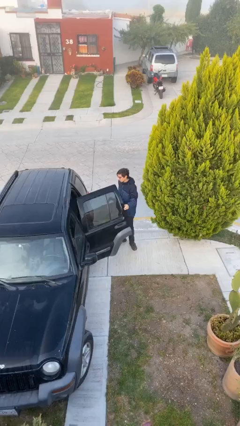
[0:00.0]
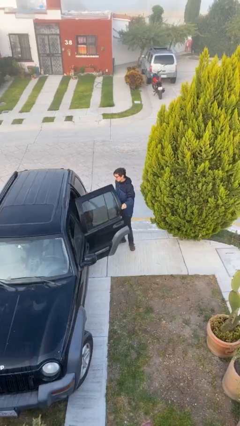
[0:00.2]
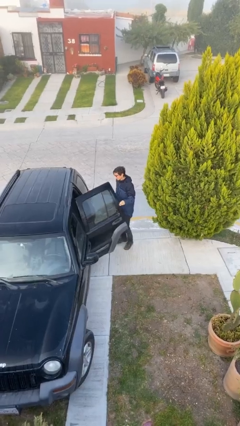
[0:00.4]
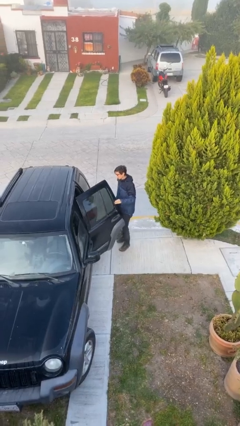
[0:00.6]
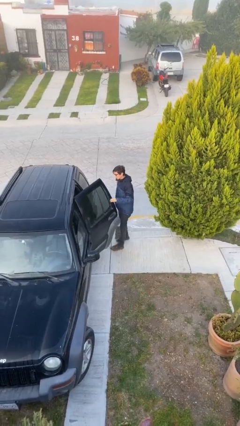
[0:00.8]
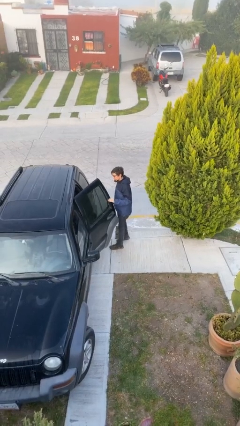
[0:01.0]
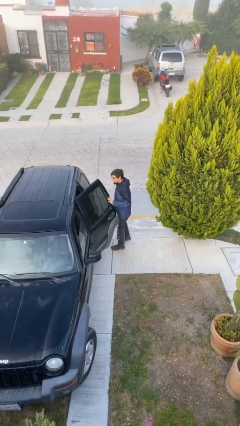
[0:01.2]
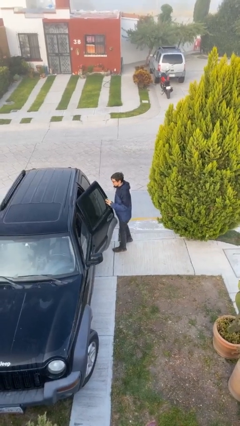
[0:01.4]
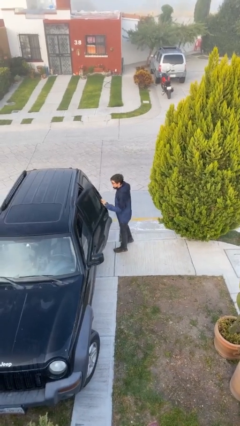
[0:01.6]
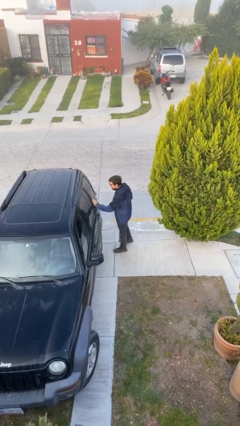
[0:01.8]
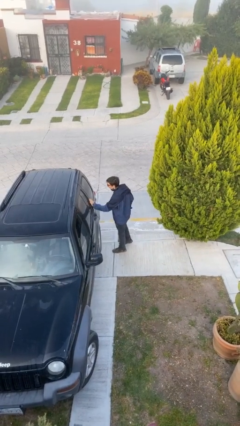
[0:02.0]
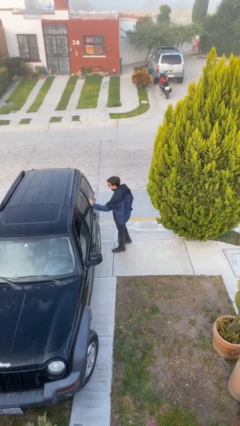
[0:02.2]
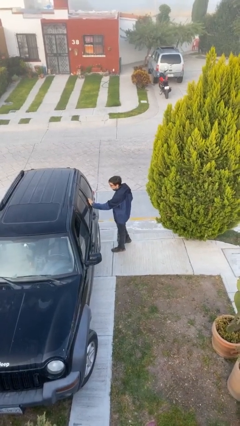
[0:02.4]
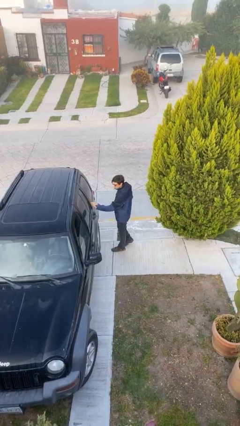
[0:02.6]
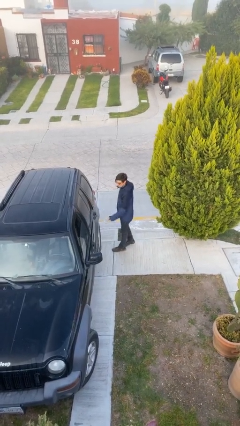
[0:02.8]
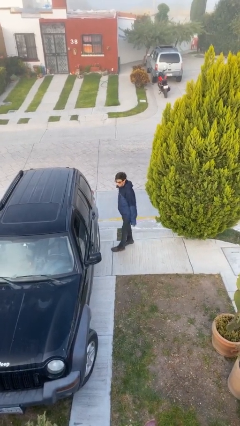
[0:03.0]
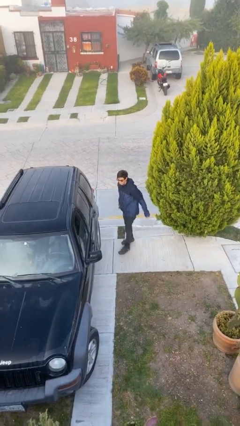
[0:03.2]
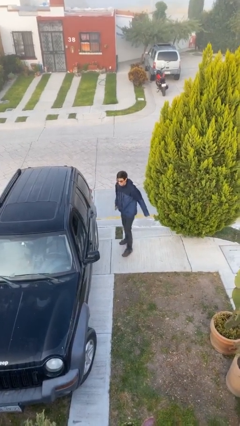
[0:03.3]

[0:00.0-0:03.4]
person closes car door

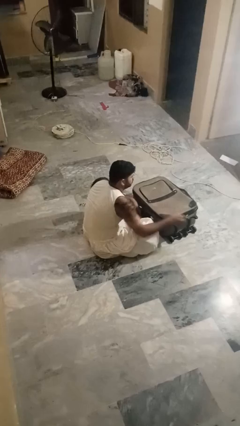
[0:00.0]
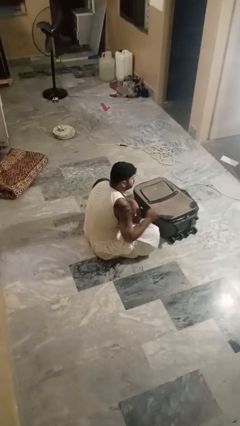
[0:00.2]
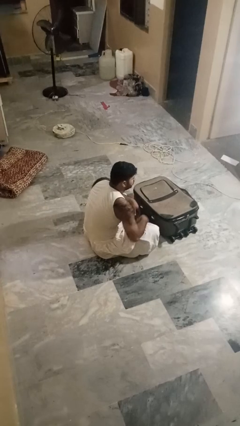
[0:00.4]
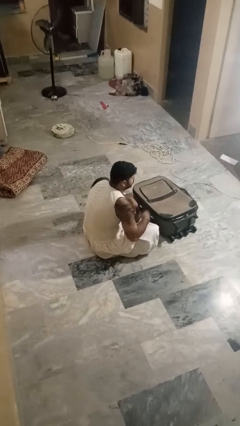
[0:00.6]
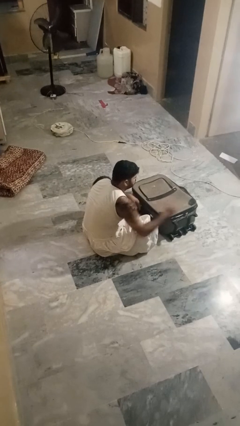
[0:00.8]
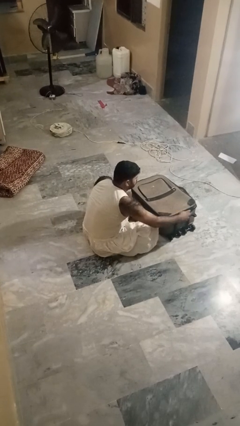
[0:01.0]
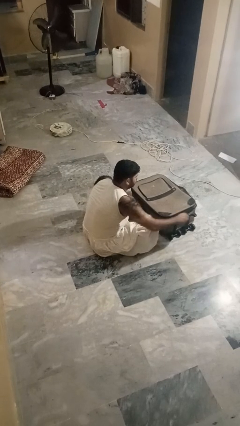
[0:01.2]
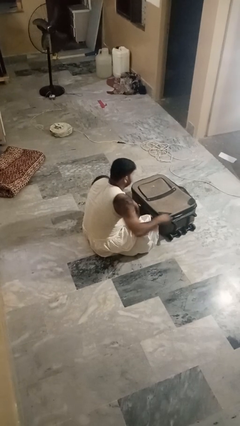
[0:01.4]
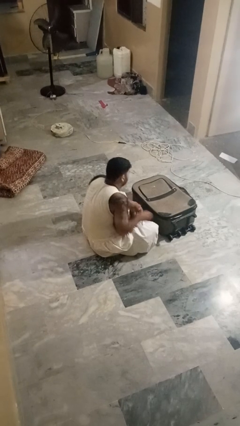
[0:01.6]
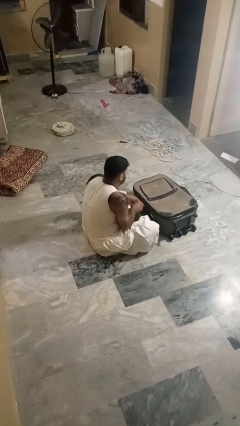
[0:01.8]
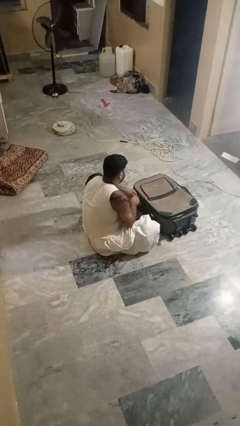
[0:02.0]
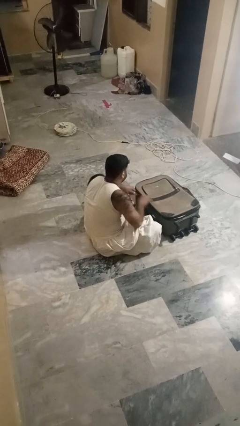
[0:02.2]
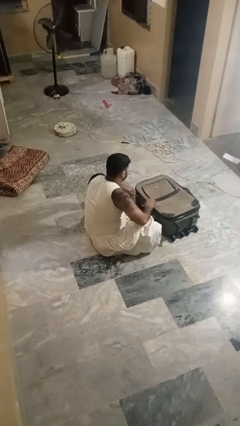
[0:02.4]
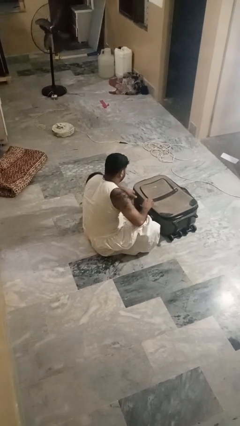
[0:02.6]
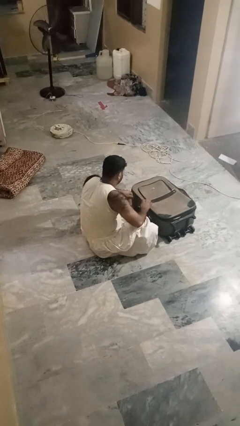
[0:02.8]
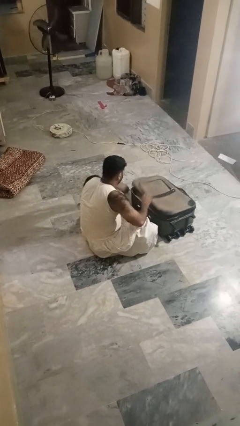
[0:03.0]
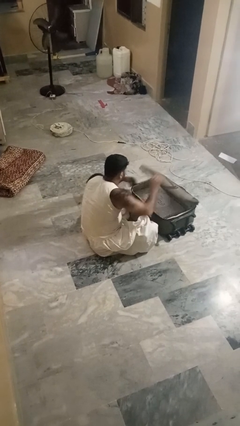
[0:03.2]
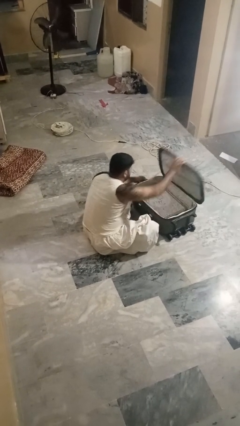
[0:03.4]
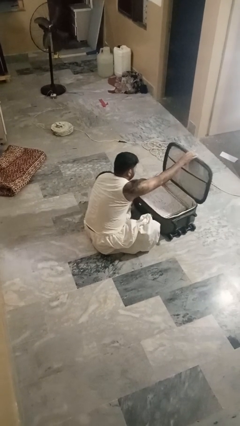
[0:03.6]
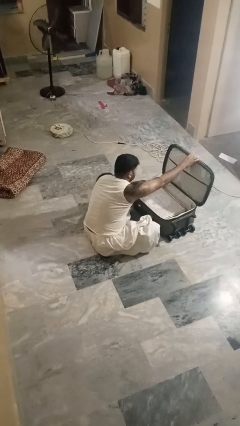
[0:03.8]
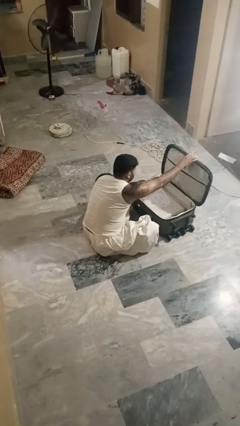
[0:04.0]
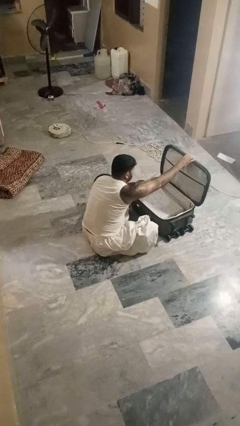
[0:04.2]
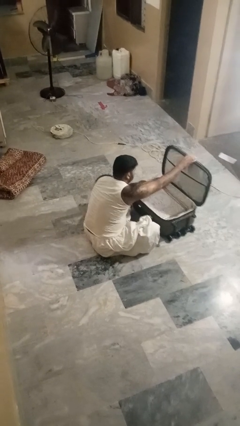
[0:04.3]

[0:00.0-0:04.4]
person opens suitcase

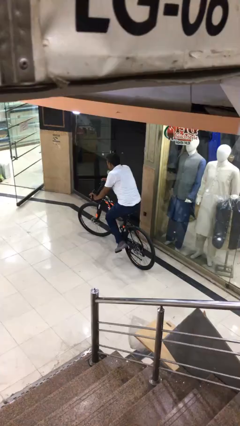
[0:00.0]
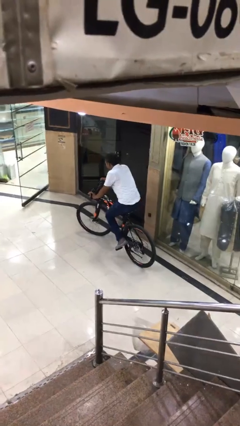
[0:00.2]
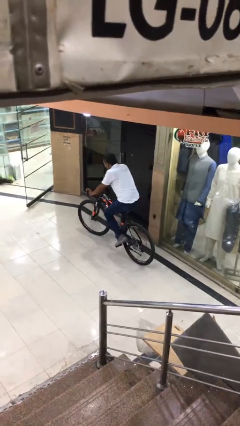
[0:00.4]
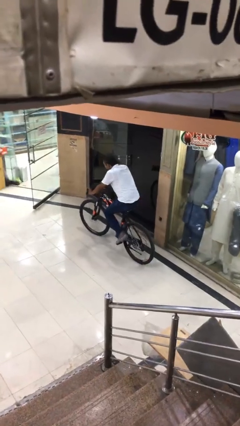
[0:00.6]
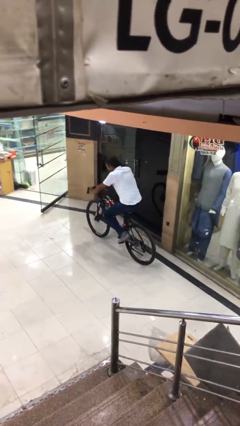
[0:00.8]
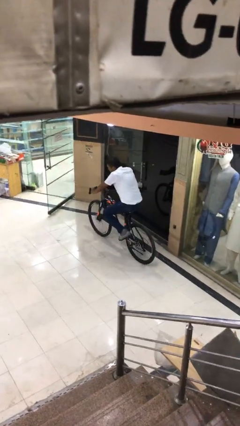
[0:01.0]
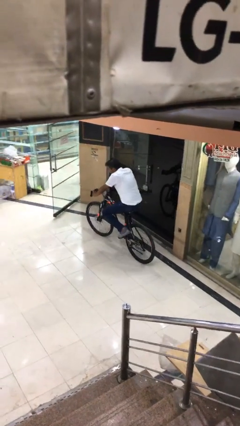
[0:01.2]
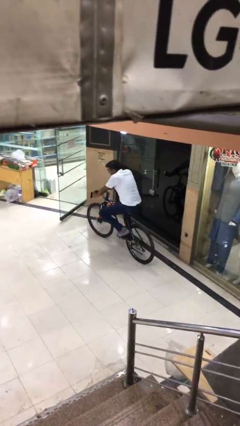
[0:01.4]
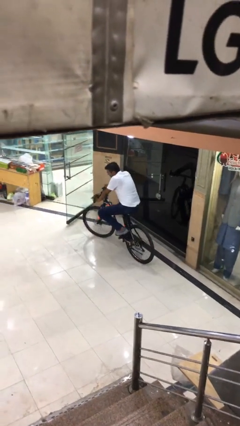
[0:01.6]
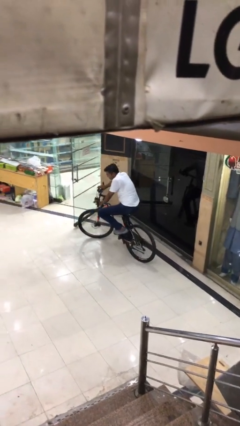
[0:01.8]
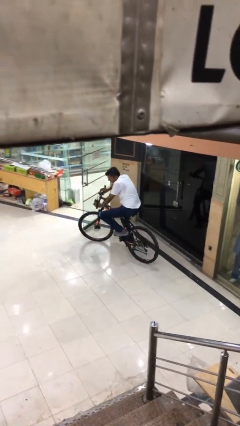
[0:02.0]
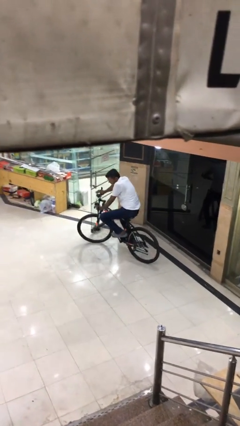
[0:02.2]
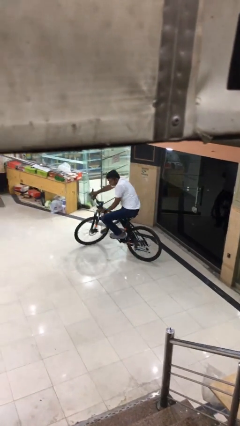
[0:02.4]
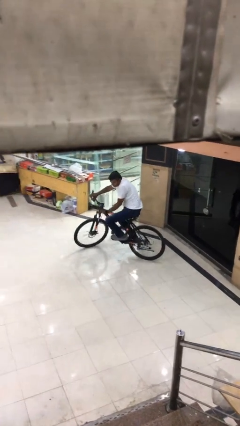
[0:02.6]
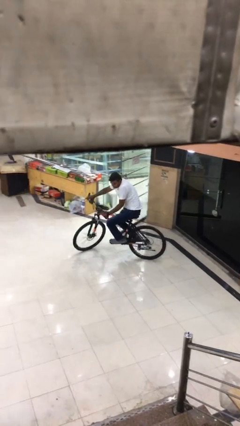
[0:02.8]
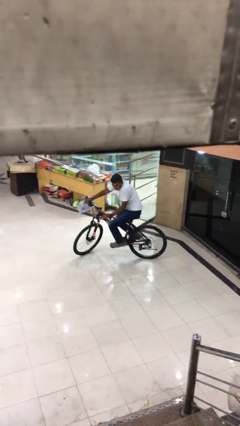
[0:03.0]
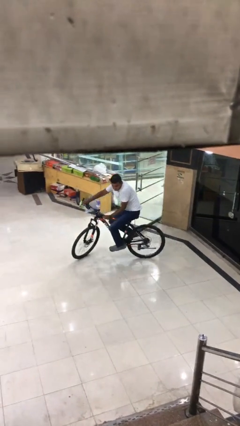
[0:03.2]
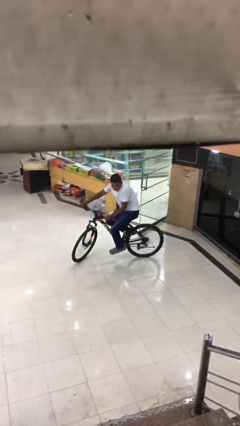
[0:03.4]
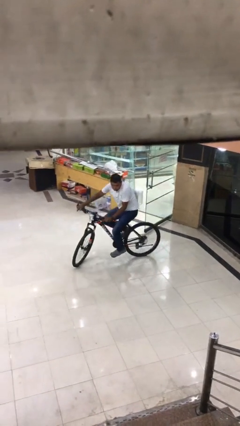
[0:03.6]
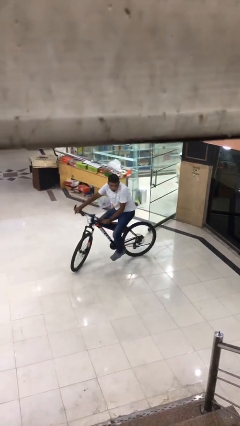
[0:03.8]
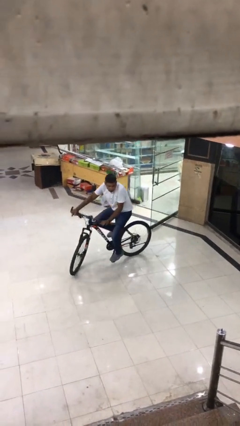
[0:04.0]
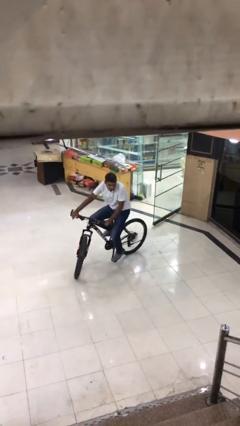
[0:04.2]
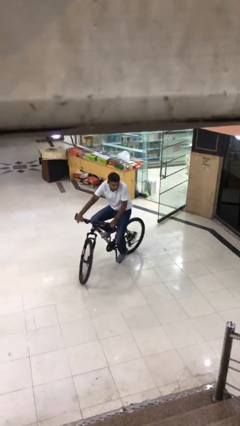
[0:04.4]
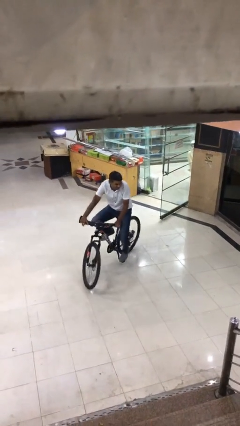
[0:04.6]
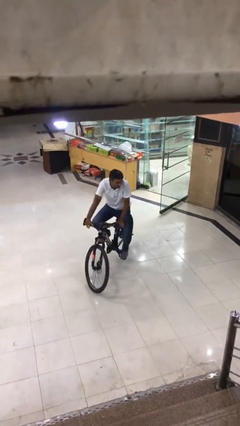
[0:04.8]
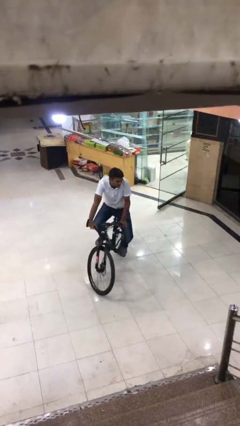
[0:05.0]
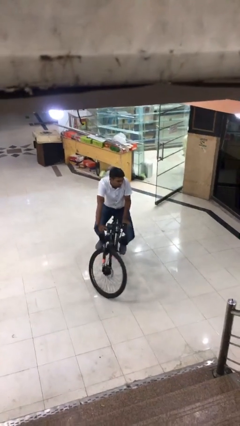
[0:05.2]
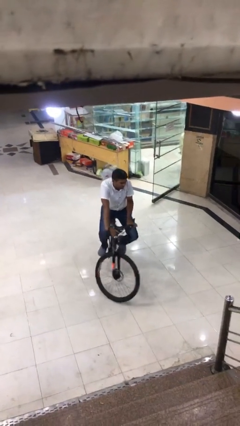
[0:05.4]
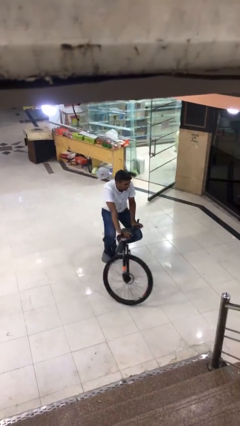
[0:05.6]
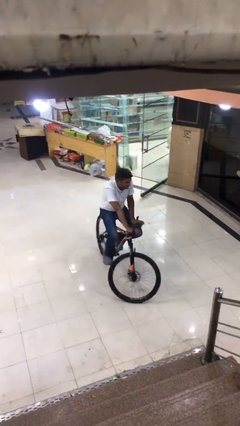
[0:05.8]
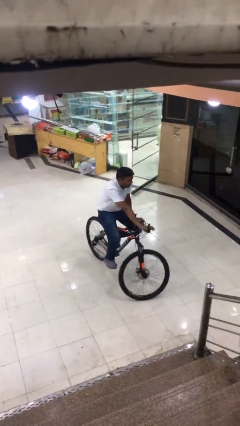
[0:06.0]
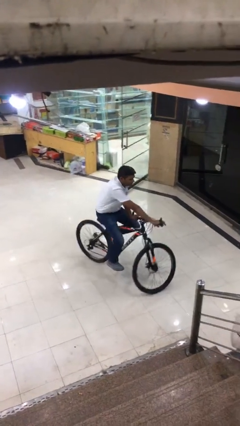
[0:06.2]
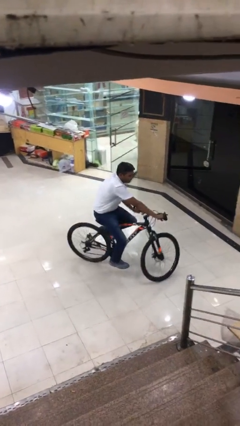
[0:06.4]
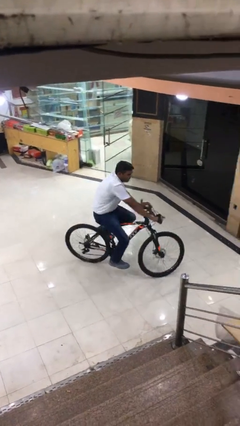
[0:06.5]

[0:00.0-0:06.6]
person rides bicycle

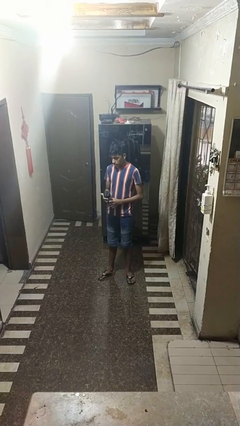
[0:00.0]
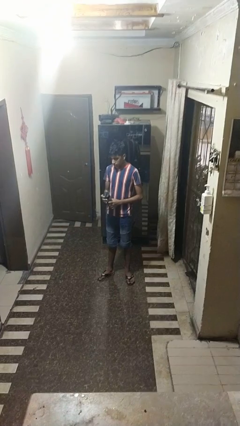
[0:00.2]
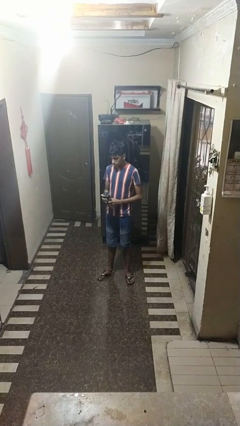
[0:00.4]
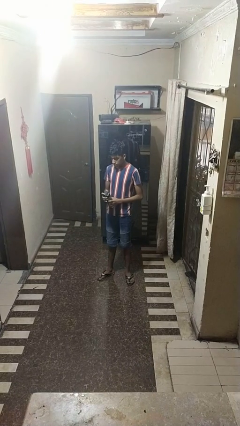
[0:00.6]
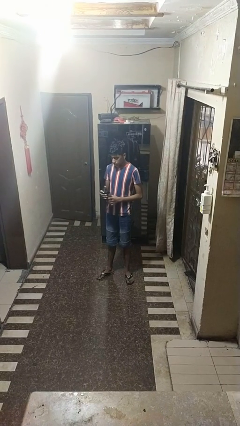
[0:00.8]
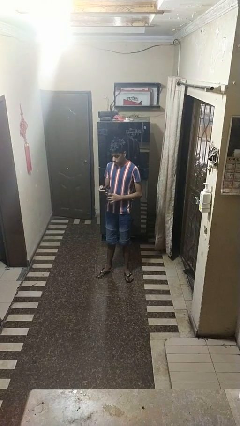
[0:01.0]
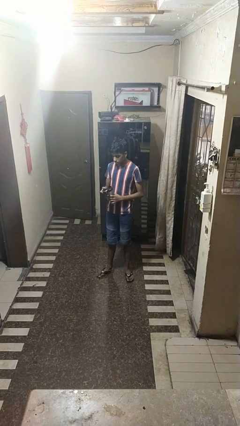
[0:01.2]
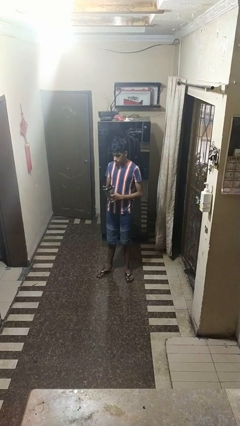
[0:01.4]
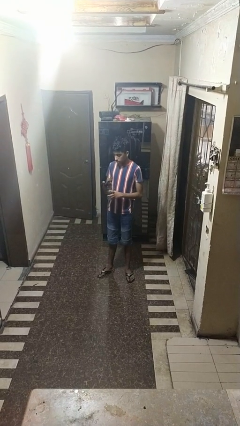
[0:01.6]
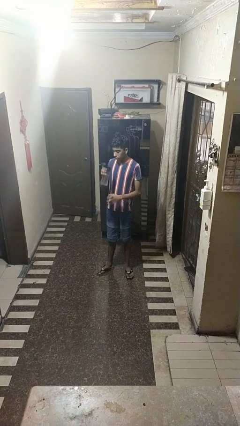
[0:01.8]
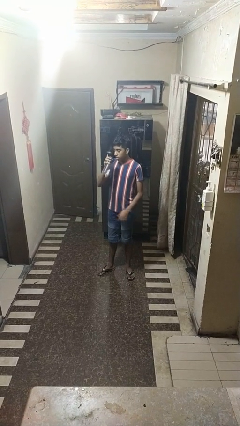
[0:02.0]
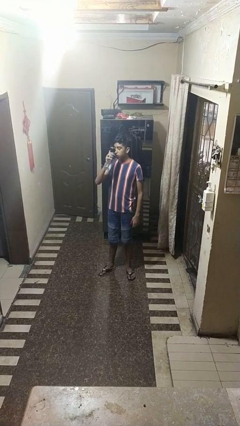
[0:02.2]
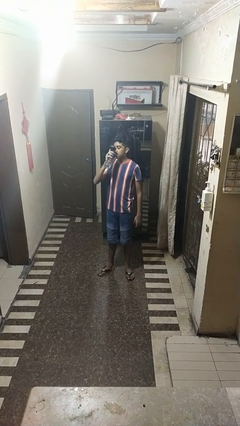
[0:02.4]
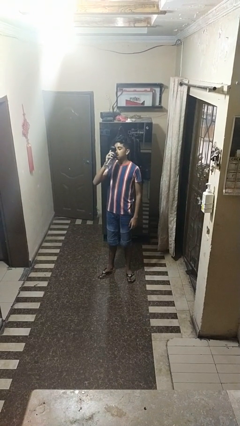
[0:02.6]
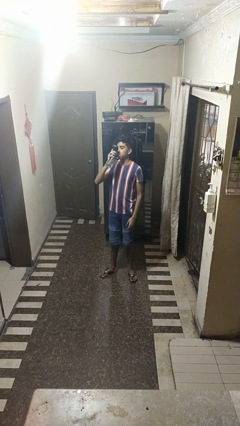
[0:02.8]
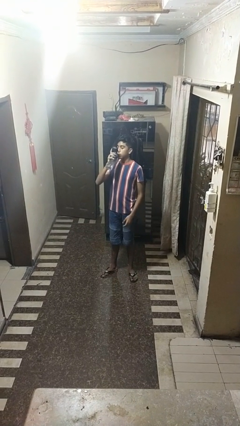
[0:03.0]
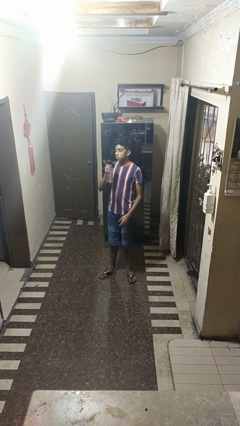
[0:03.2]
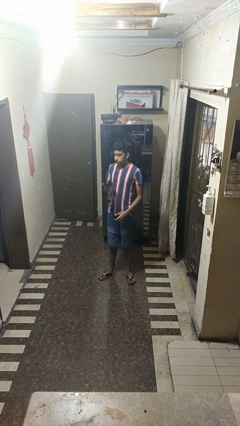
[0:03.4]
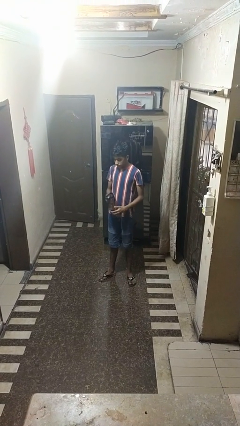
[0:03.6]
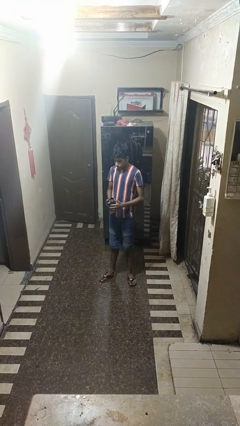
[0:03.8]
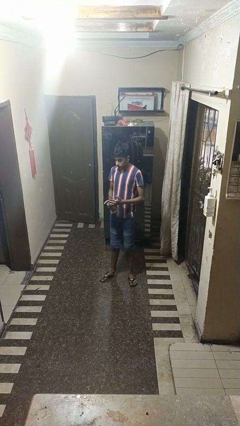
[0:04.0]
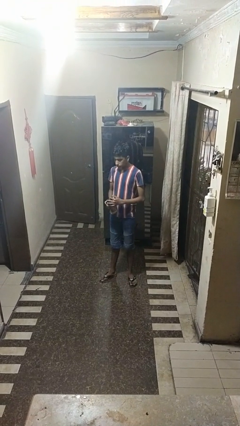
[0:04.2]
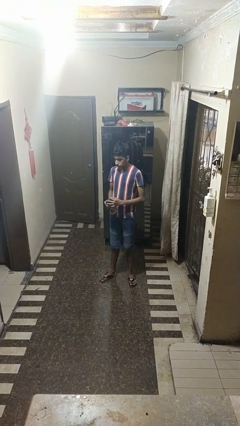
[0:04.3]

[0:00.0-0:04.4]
person drinks from bottle
